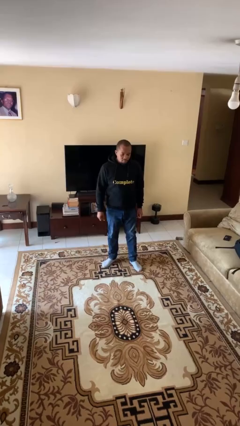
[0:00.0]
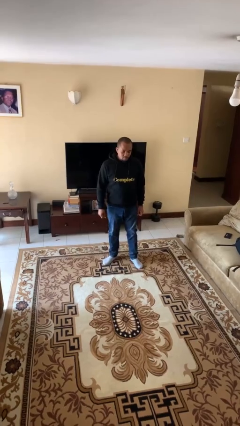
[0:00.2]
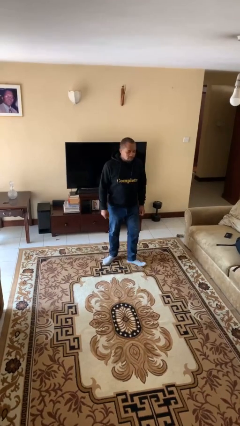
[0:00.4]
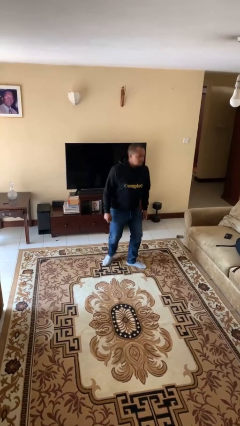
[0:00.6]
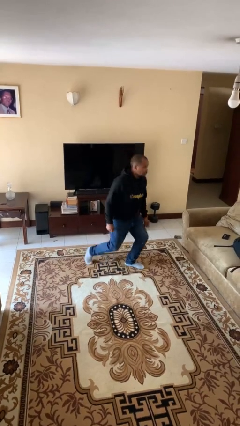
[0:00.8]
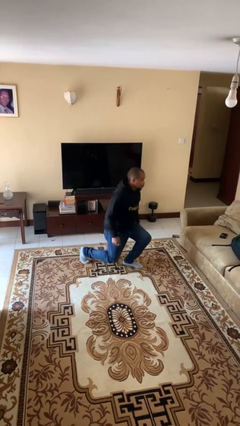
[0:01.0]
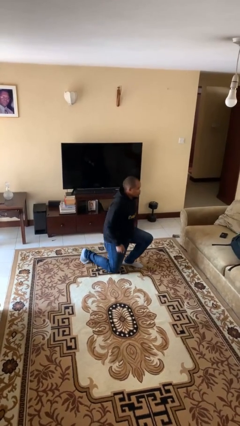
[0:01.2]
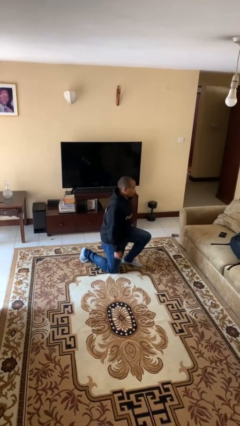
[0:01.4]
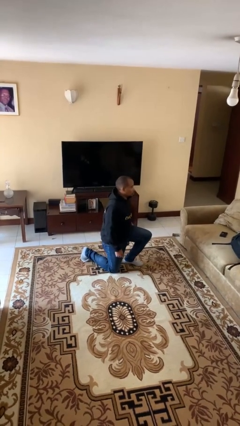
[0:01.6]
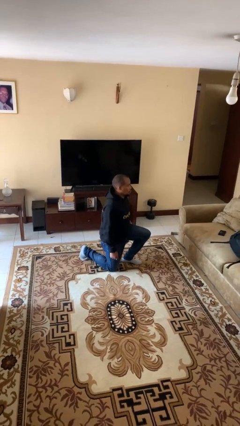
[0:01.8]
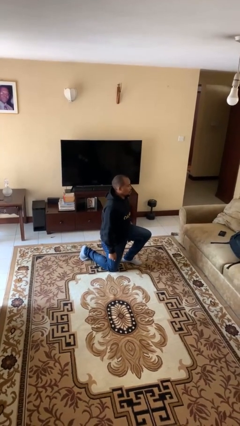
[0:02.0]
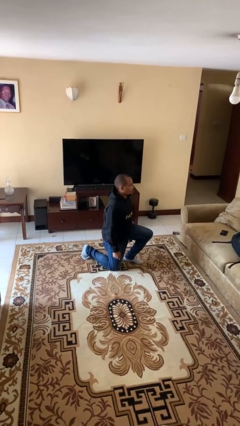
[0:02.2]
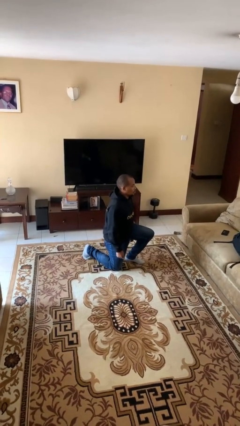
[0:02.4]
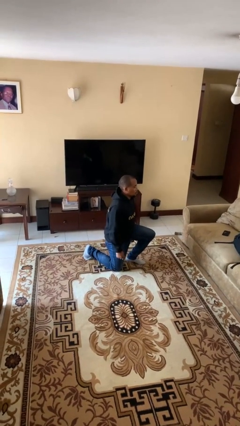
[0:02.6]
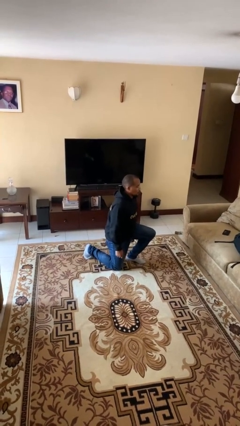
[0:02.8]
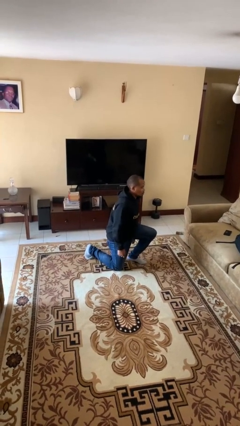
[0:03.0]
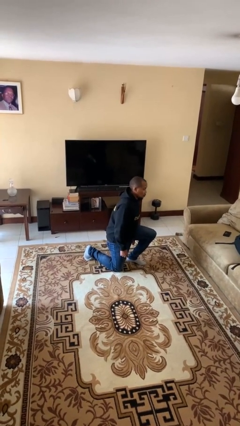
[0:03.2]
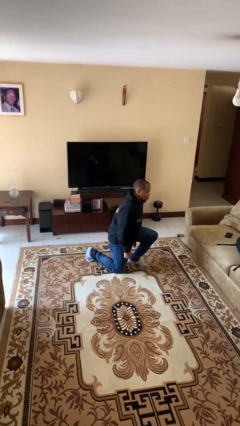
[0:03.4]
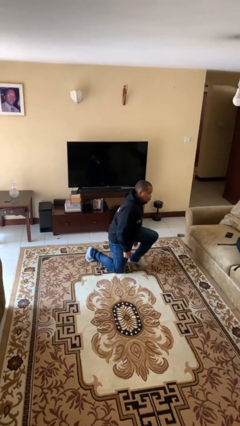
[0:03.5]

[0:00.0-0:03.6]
person kneels

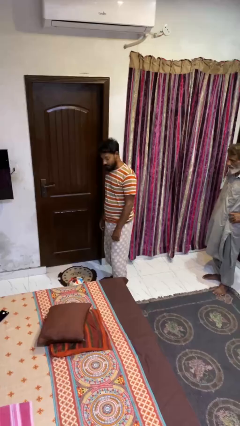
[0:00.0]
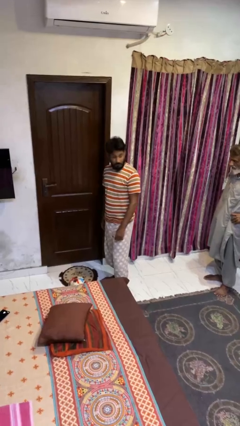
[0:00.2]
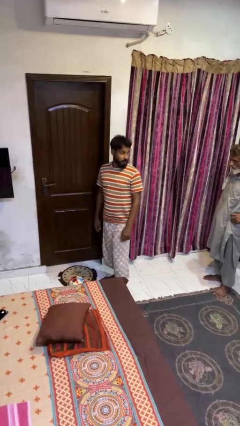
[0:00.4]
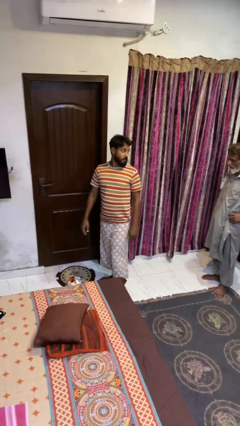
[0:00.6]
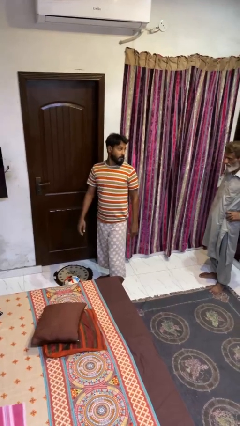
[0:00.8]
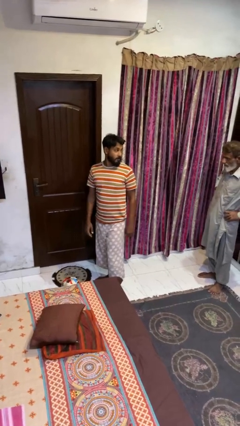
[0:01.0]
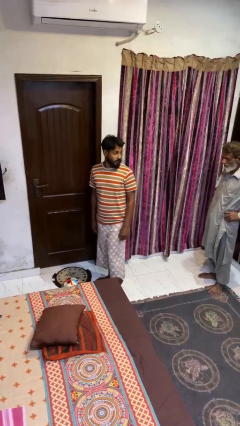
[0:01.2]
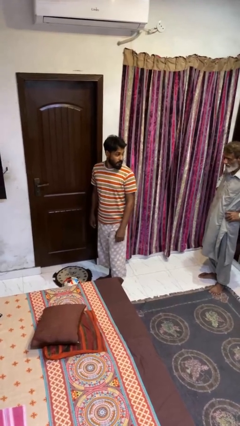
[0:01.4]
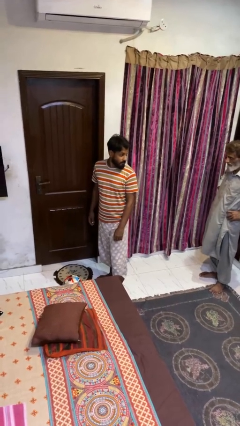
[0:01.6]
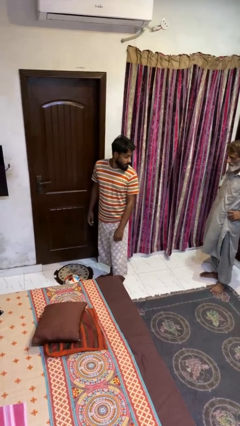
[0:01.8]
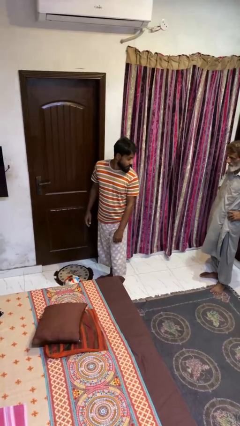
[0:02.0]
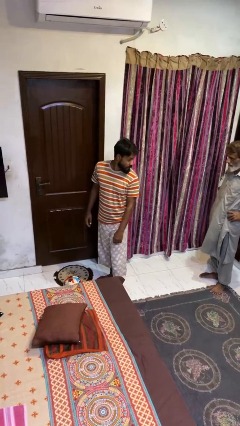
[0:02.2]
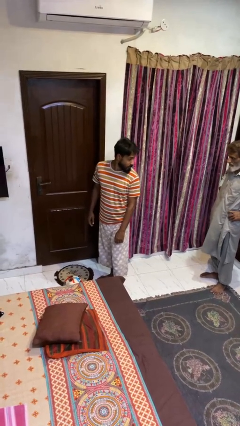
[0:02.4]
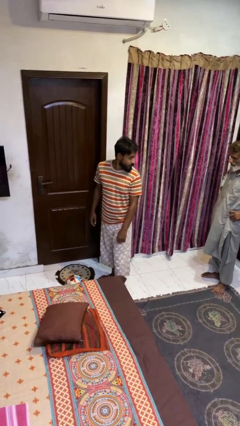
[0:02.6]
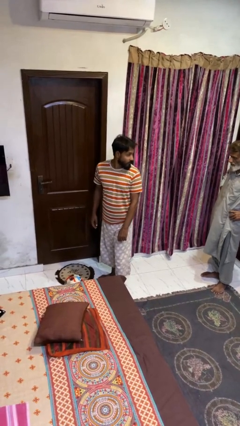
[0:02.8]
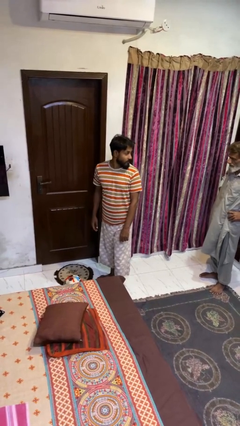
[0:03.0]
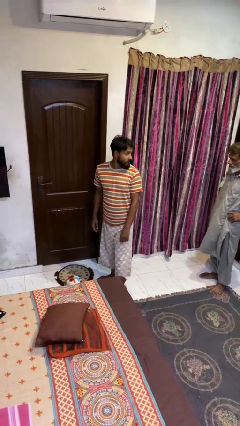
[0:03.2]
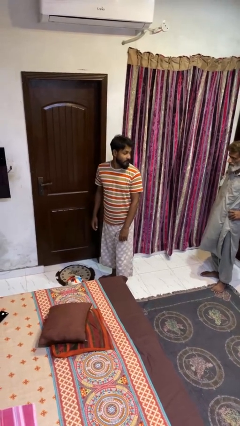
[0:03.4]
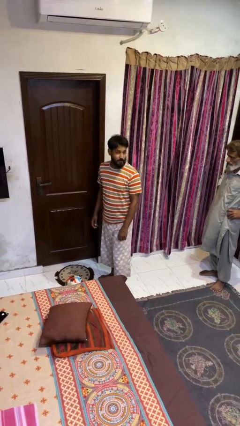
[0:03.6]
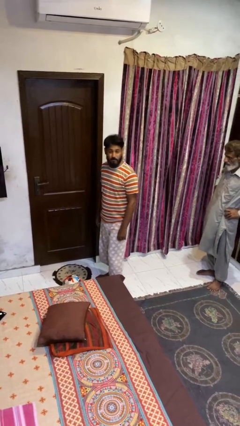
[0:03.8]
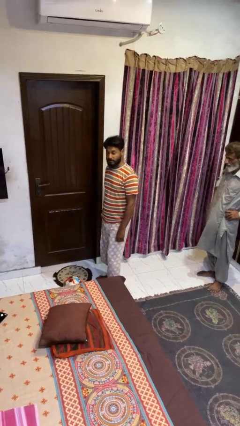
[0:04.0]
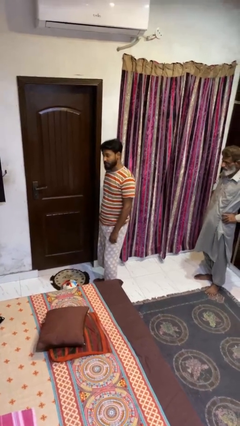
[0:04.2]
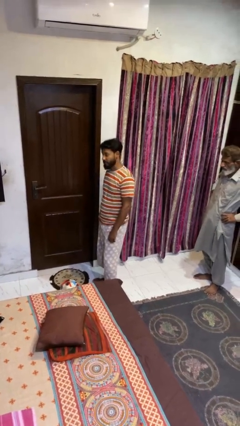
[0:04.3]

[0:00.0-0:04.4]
person looks over shoulder

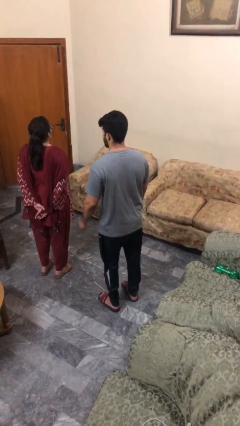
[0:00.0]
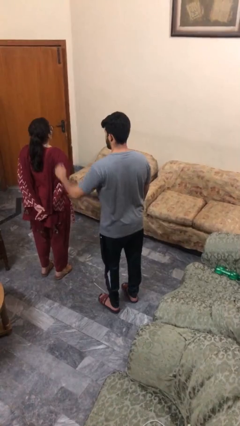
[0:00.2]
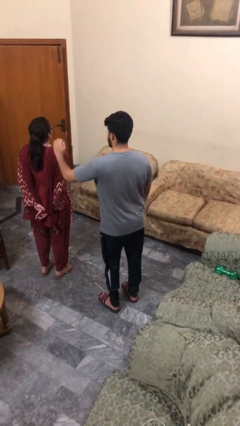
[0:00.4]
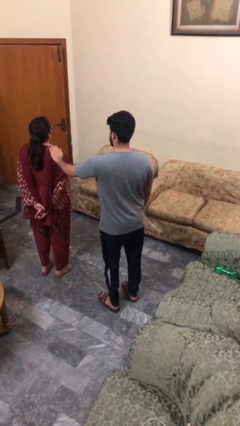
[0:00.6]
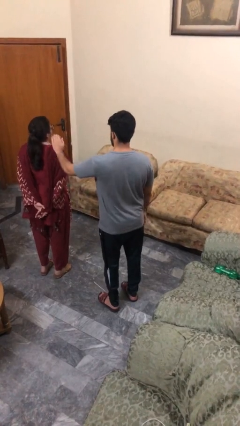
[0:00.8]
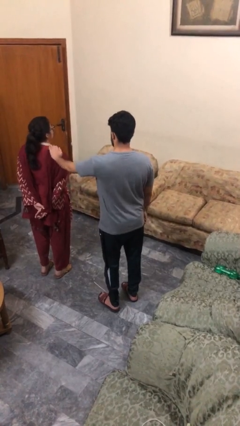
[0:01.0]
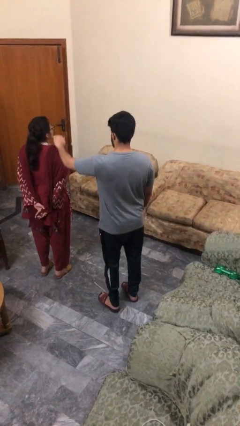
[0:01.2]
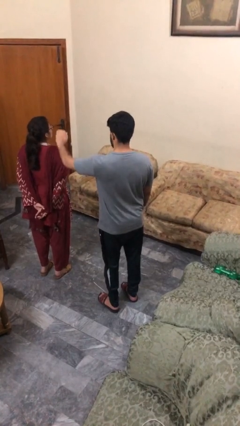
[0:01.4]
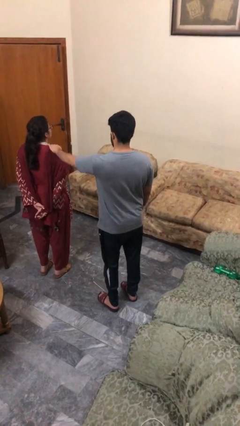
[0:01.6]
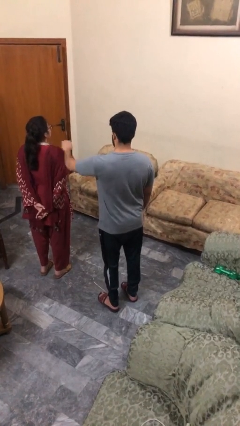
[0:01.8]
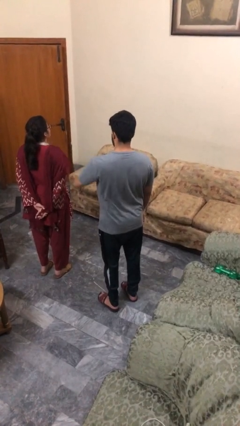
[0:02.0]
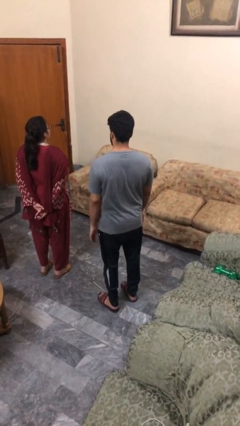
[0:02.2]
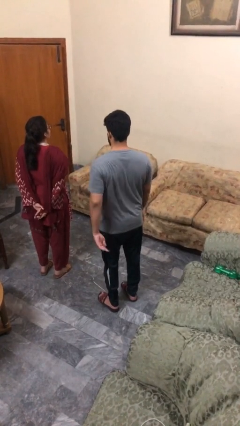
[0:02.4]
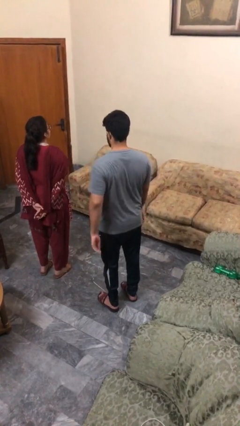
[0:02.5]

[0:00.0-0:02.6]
person pounds shoulders of person

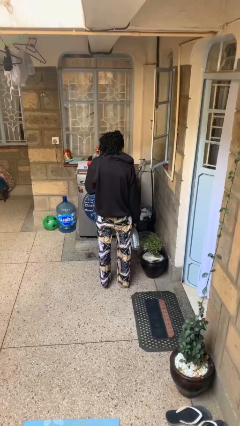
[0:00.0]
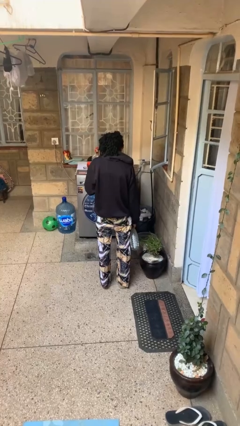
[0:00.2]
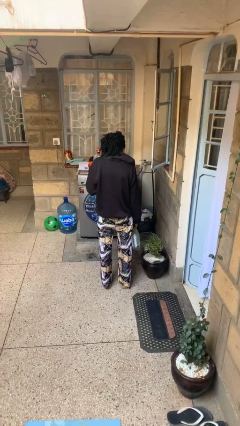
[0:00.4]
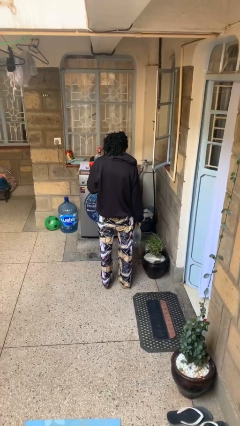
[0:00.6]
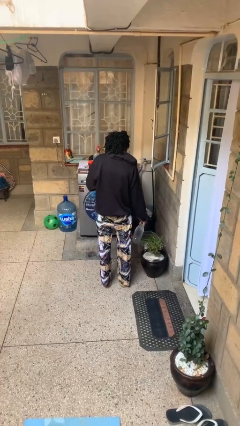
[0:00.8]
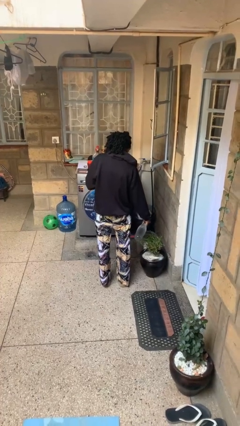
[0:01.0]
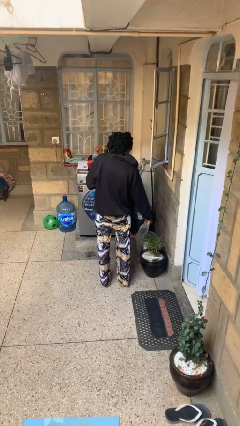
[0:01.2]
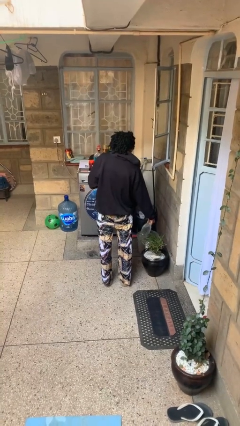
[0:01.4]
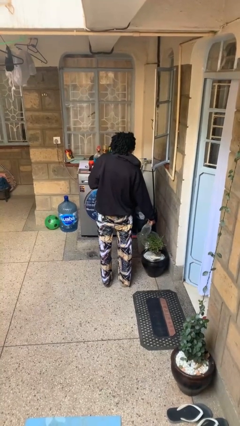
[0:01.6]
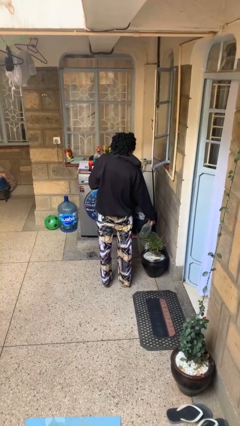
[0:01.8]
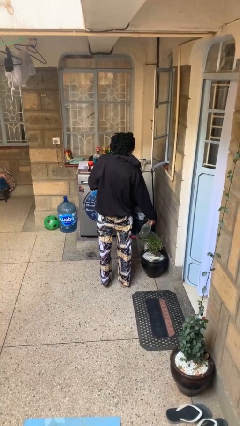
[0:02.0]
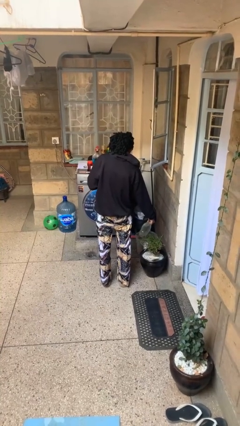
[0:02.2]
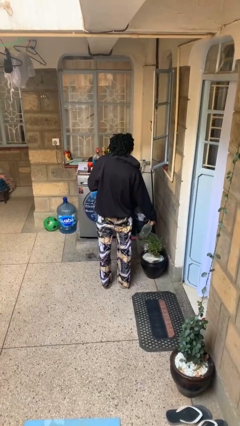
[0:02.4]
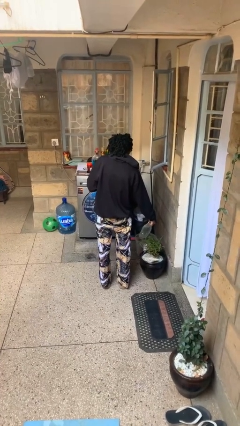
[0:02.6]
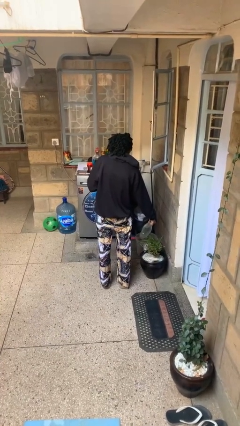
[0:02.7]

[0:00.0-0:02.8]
person waters houseplant

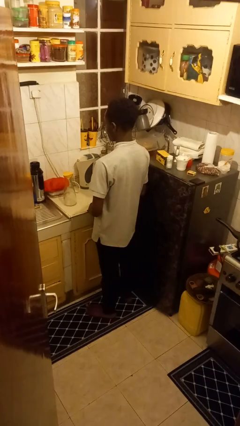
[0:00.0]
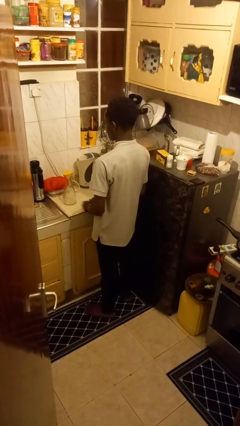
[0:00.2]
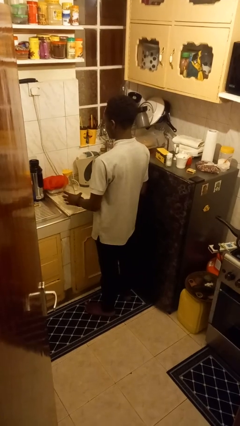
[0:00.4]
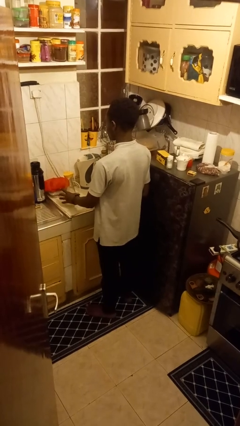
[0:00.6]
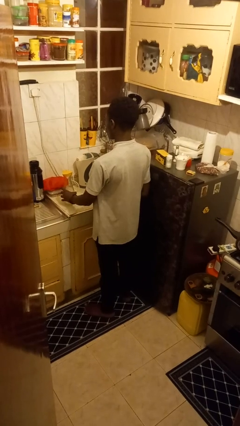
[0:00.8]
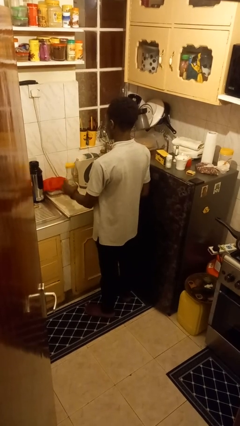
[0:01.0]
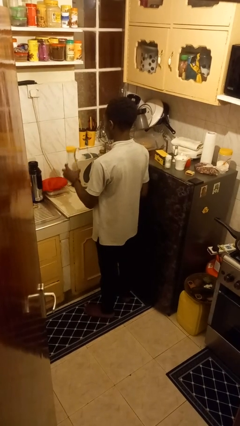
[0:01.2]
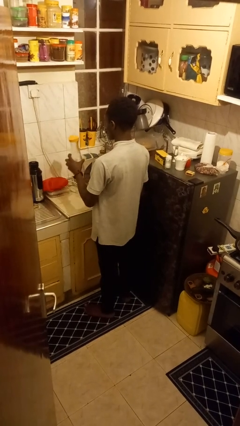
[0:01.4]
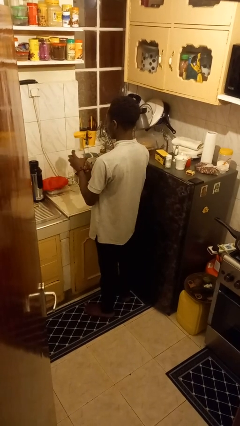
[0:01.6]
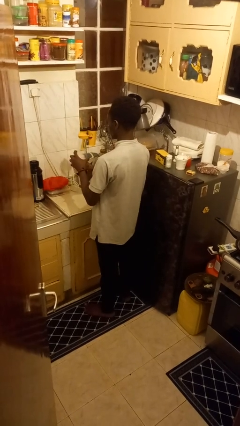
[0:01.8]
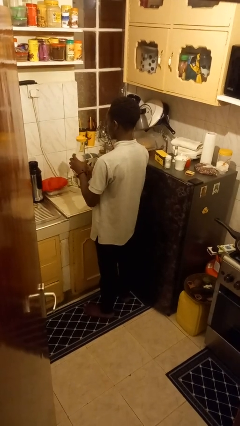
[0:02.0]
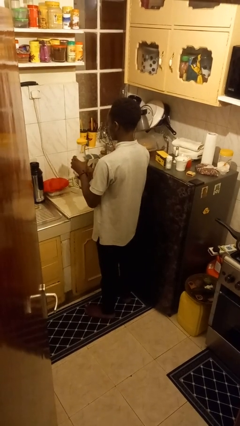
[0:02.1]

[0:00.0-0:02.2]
person picks up object from countertop

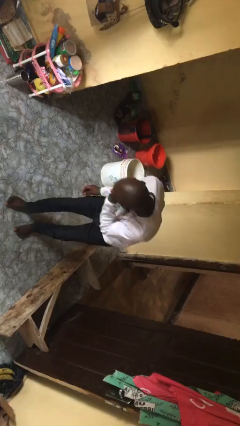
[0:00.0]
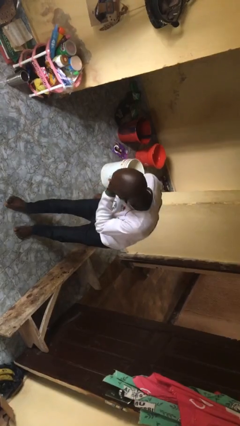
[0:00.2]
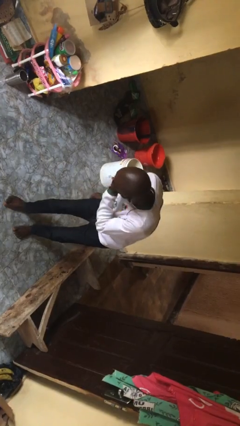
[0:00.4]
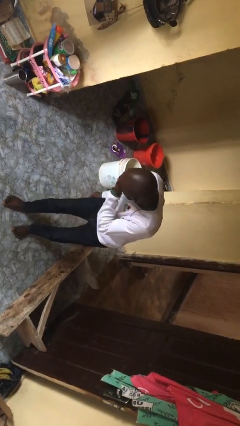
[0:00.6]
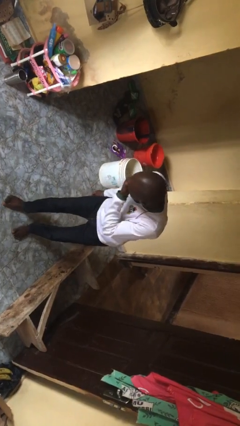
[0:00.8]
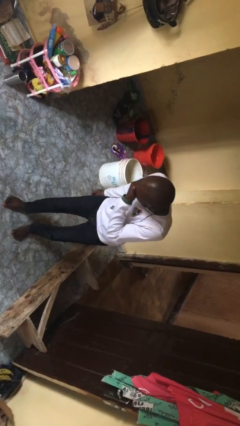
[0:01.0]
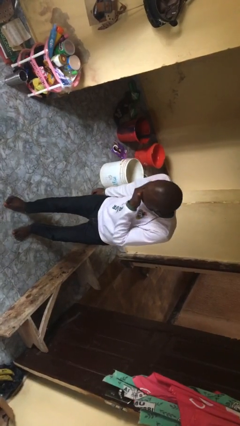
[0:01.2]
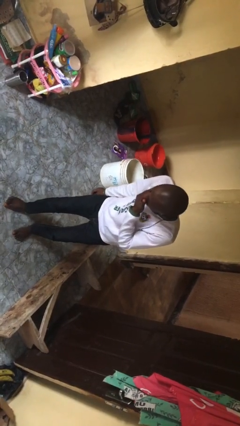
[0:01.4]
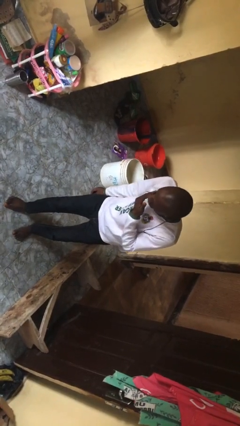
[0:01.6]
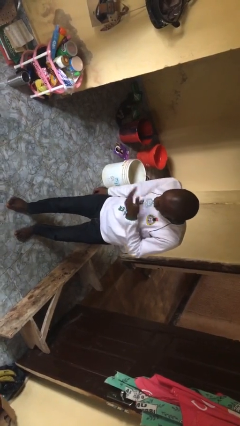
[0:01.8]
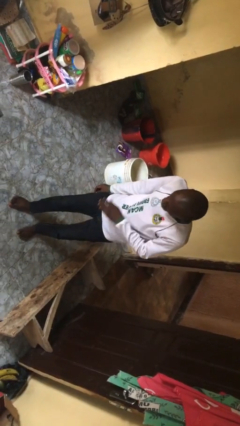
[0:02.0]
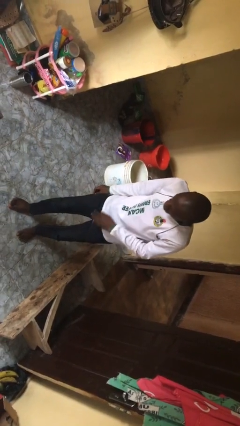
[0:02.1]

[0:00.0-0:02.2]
person sneezes into hand
